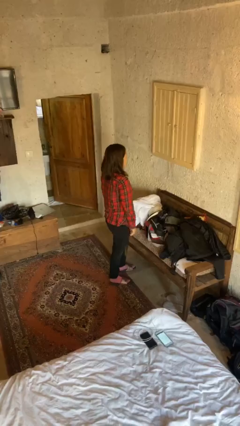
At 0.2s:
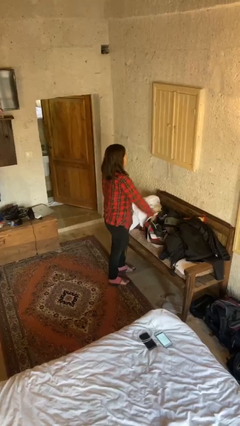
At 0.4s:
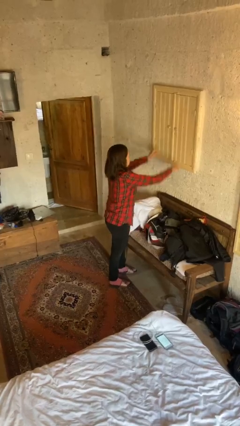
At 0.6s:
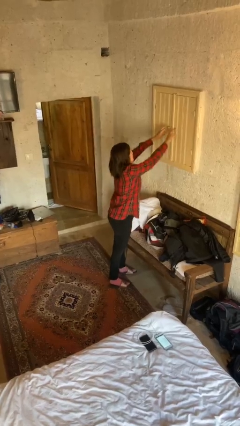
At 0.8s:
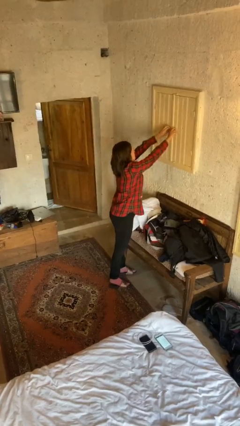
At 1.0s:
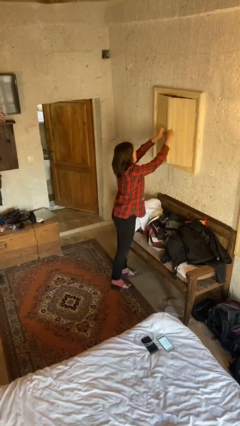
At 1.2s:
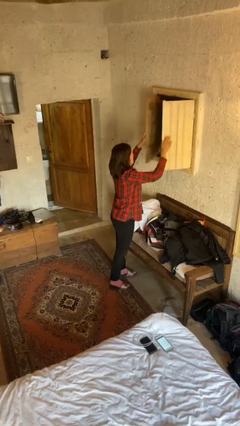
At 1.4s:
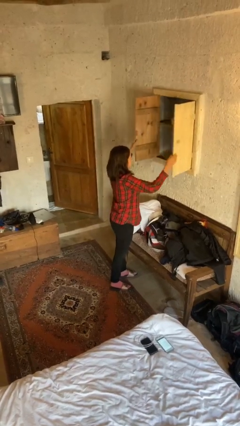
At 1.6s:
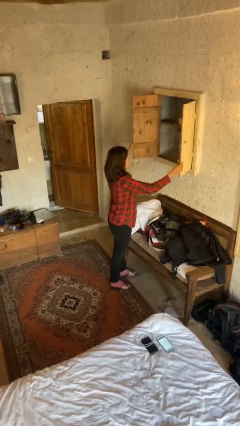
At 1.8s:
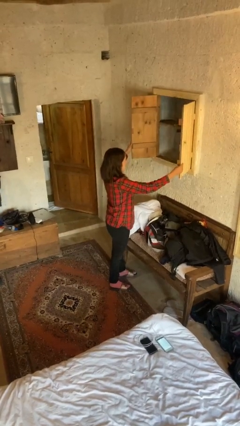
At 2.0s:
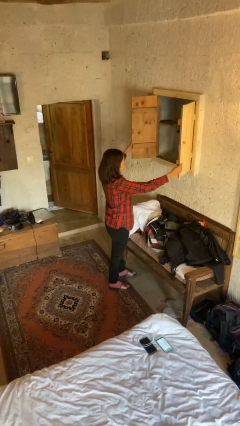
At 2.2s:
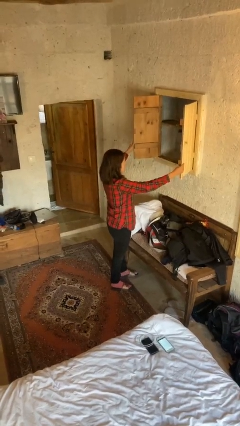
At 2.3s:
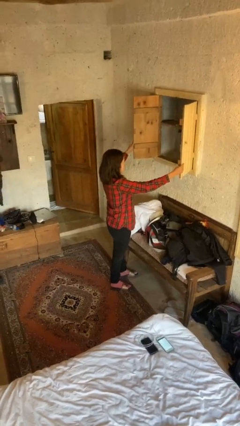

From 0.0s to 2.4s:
person opens closet door

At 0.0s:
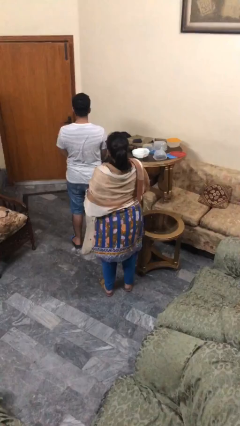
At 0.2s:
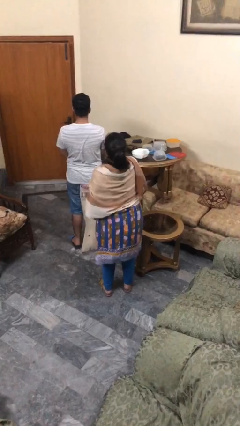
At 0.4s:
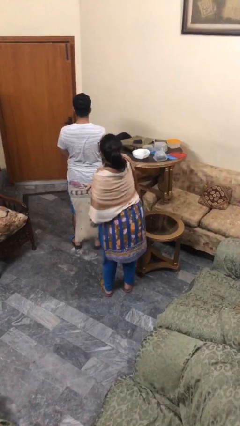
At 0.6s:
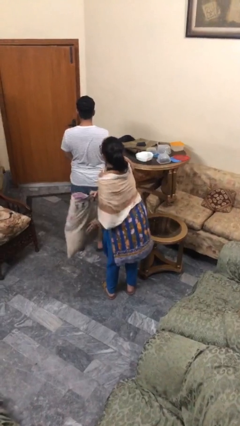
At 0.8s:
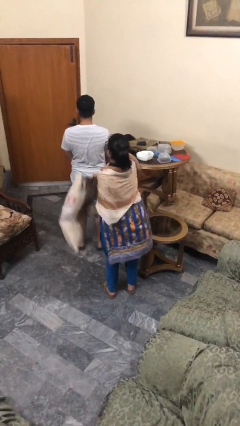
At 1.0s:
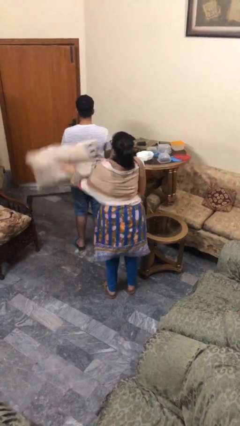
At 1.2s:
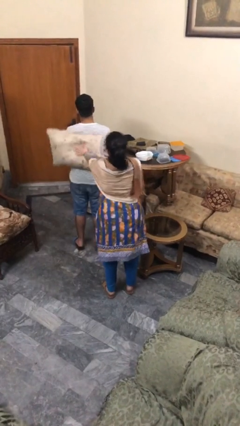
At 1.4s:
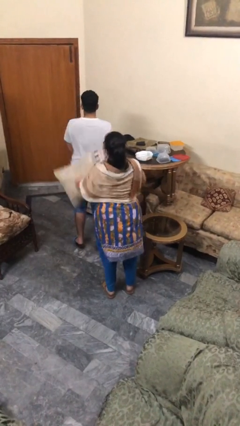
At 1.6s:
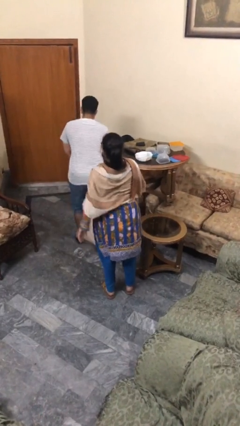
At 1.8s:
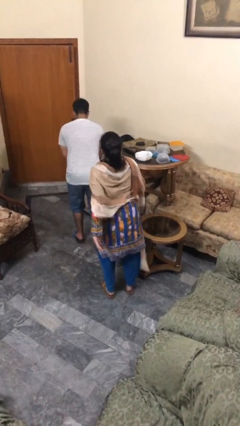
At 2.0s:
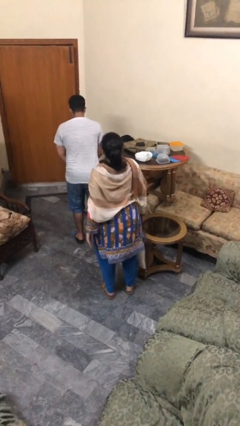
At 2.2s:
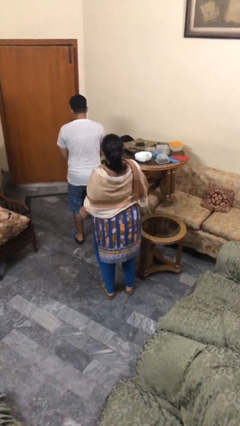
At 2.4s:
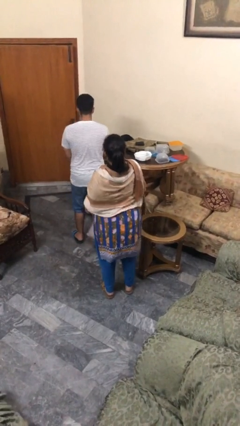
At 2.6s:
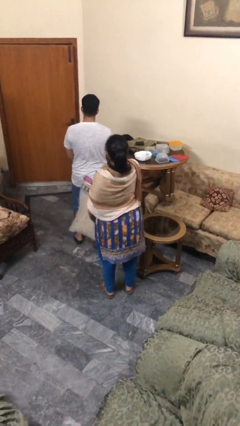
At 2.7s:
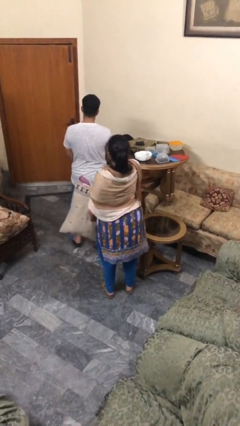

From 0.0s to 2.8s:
person hits person with pillow

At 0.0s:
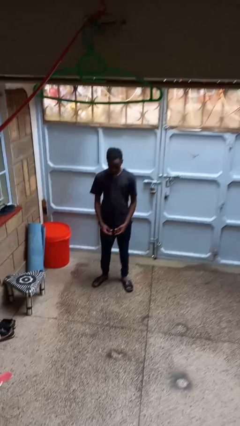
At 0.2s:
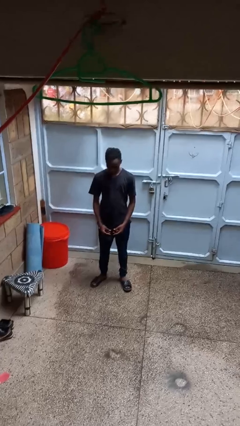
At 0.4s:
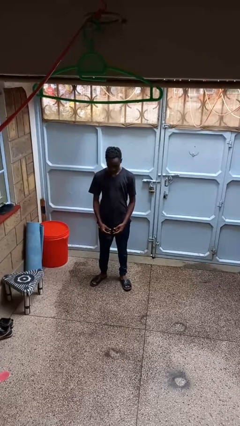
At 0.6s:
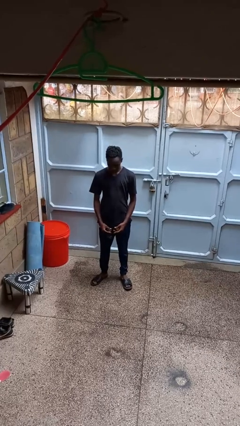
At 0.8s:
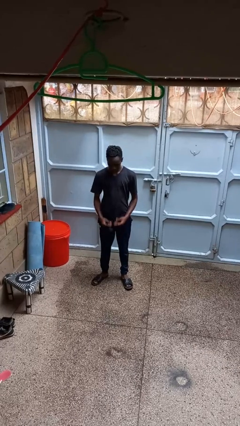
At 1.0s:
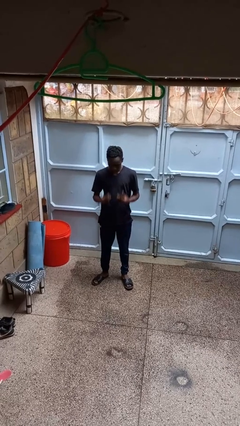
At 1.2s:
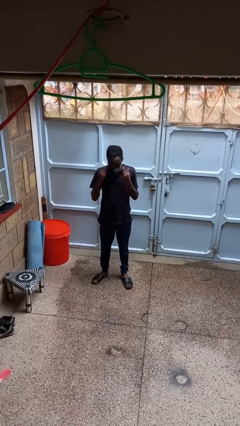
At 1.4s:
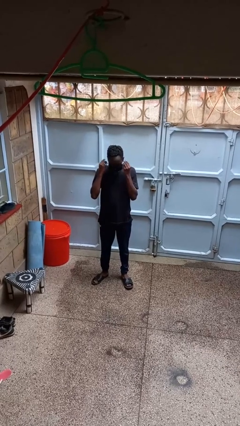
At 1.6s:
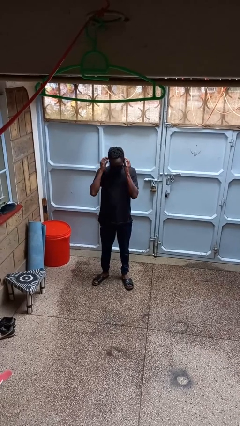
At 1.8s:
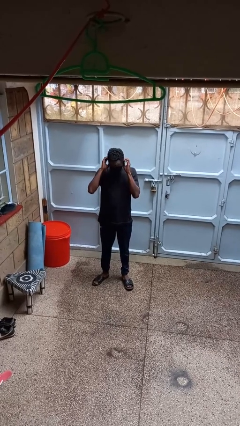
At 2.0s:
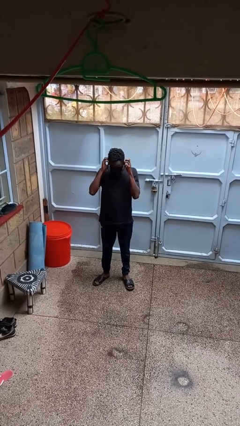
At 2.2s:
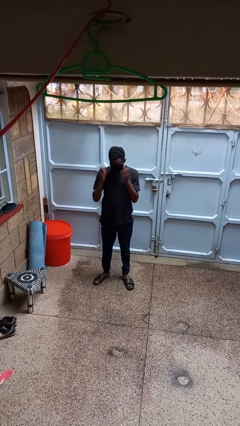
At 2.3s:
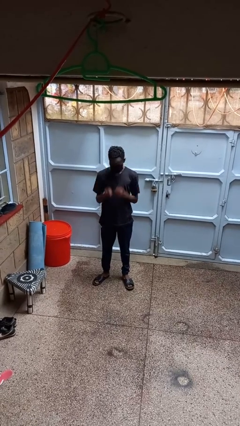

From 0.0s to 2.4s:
person puts on facemask

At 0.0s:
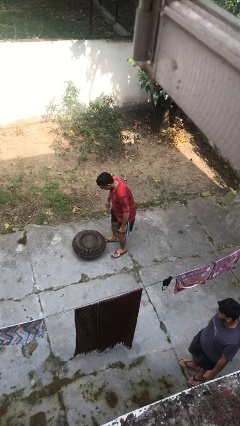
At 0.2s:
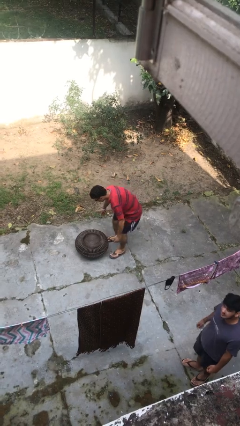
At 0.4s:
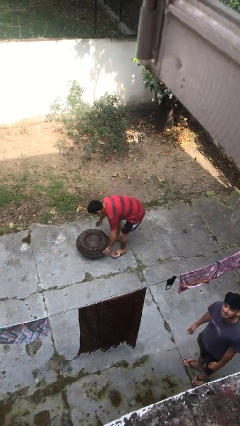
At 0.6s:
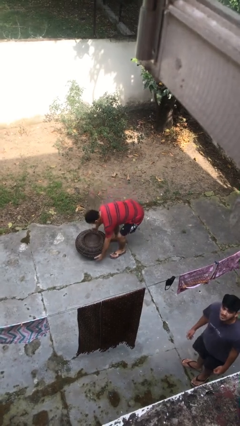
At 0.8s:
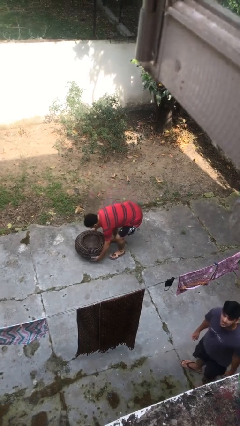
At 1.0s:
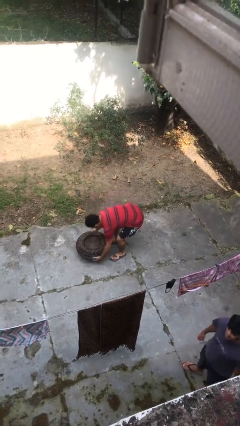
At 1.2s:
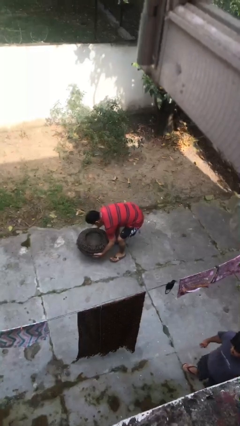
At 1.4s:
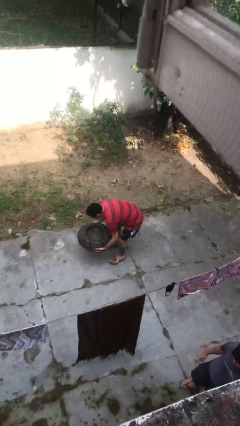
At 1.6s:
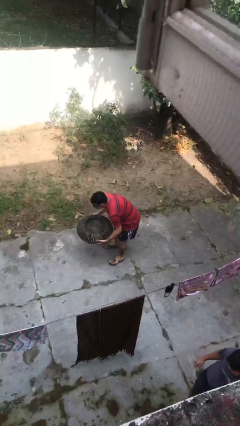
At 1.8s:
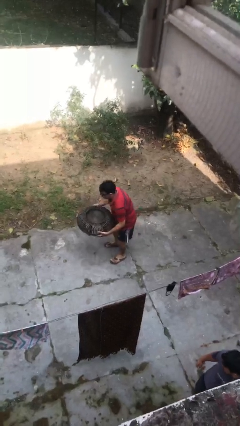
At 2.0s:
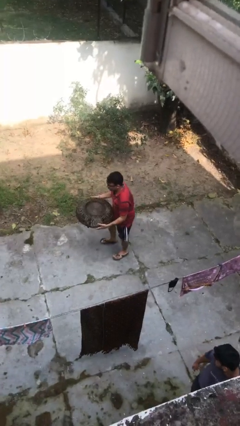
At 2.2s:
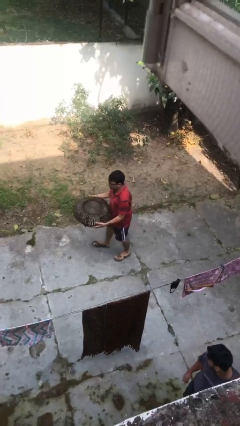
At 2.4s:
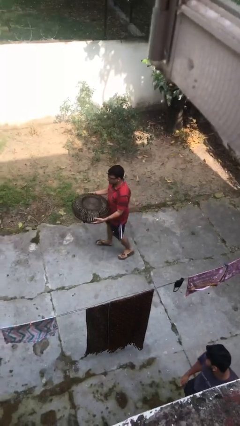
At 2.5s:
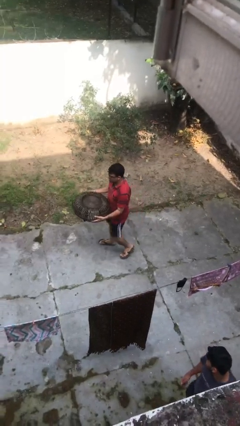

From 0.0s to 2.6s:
person picks up object from floor

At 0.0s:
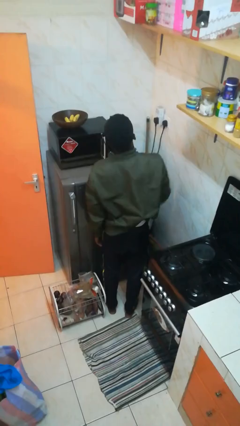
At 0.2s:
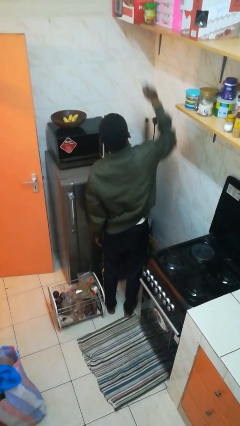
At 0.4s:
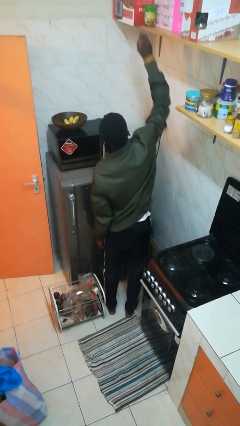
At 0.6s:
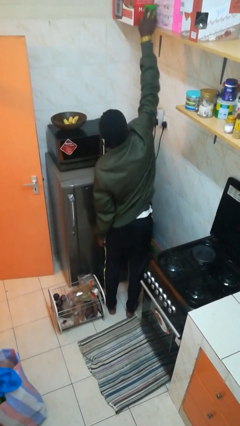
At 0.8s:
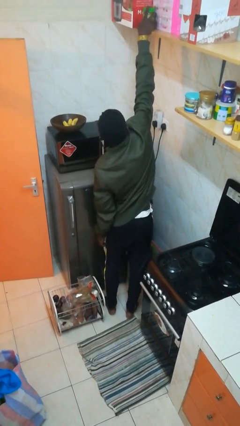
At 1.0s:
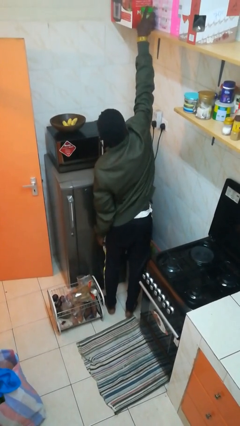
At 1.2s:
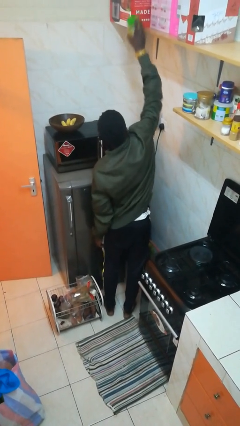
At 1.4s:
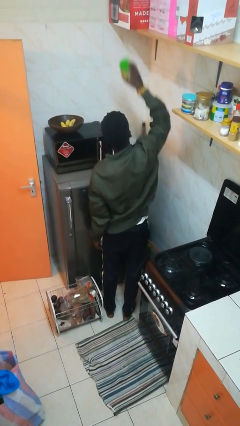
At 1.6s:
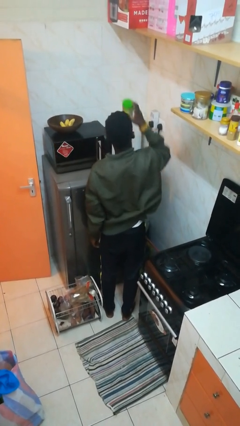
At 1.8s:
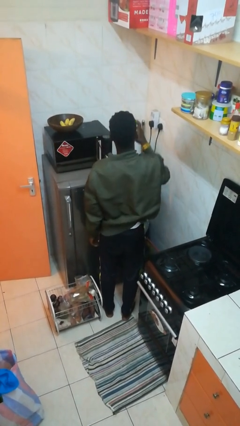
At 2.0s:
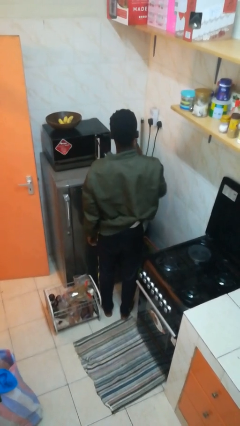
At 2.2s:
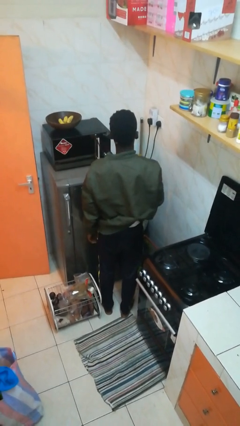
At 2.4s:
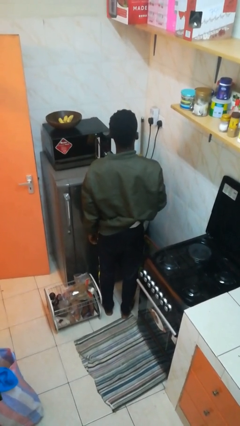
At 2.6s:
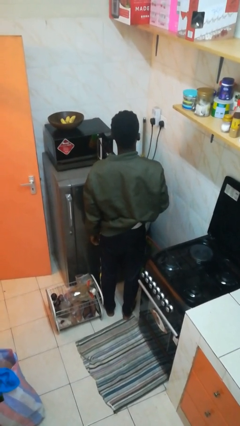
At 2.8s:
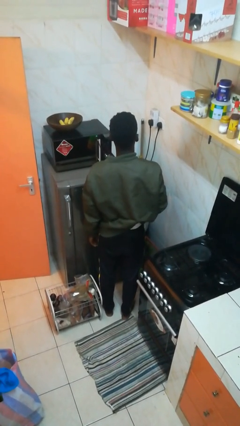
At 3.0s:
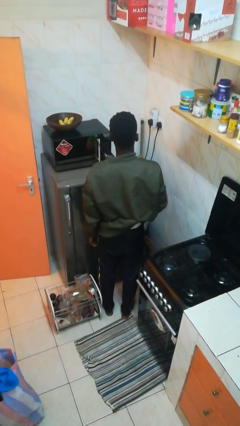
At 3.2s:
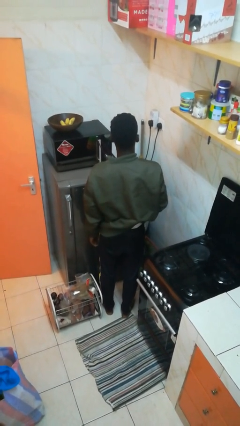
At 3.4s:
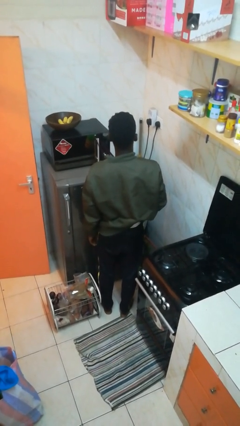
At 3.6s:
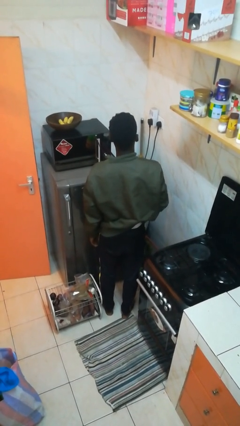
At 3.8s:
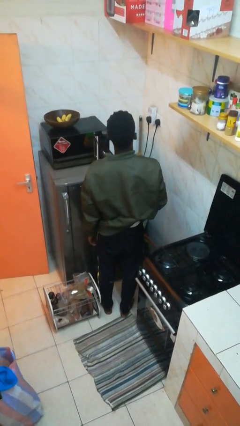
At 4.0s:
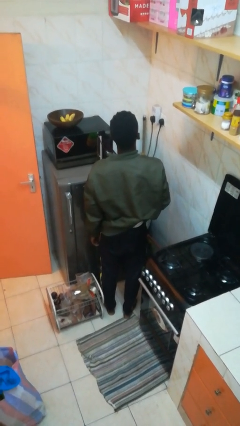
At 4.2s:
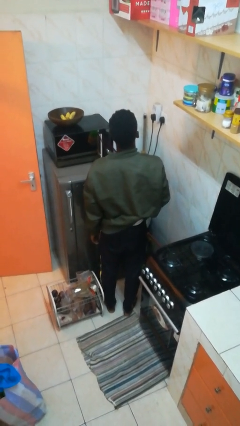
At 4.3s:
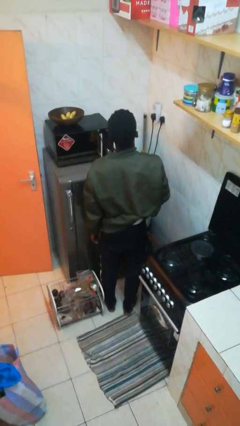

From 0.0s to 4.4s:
person picks up object from shelf

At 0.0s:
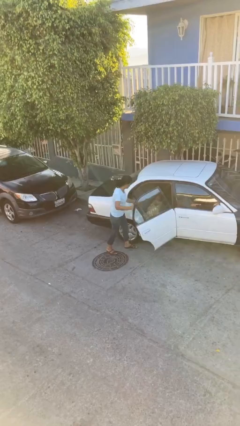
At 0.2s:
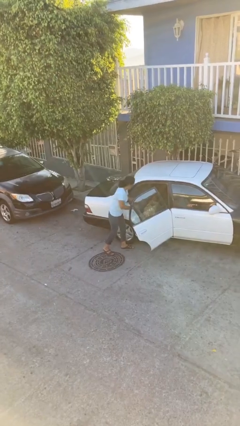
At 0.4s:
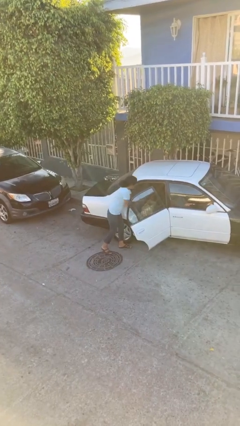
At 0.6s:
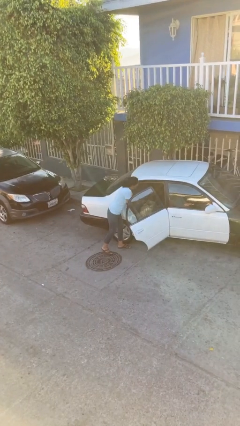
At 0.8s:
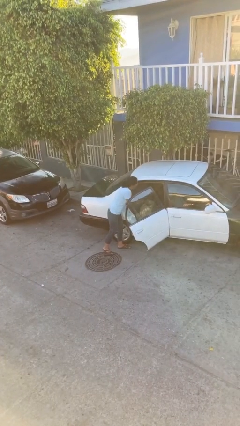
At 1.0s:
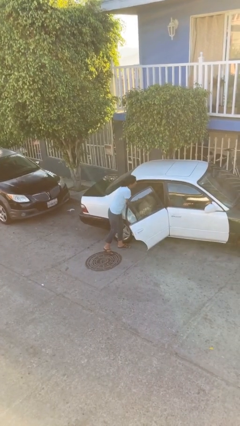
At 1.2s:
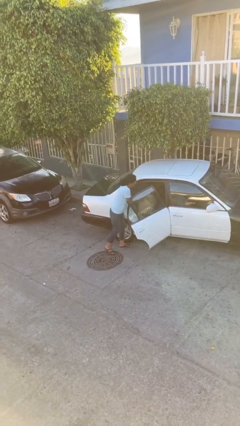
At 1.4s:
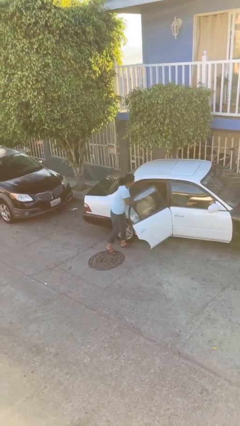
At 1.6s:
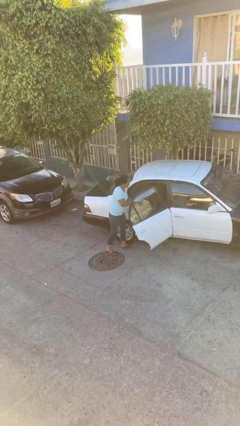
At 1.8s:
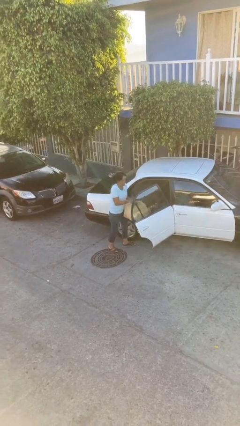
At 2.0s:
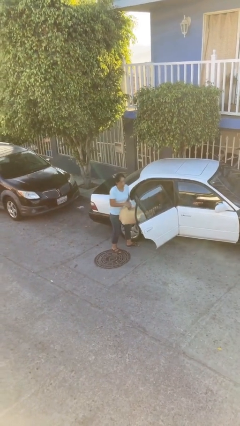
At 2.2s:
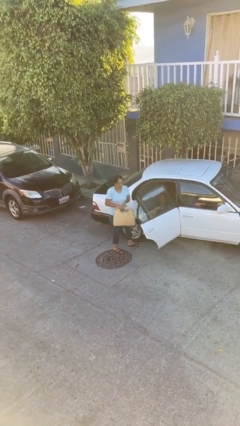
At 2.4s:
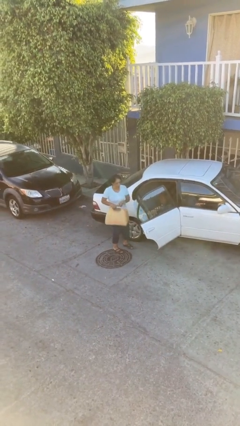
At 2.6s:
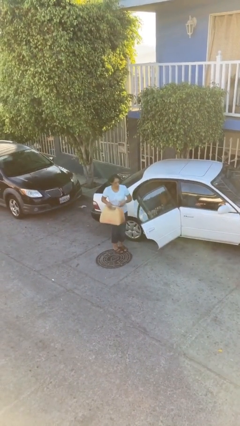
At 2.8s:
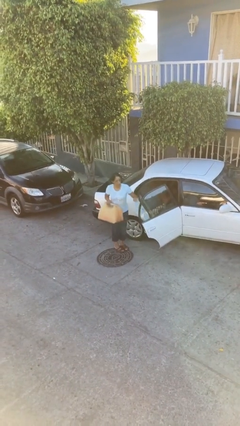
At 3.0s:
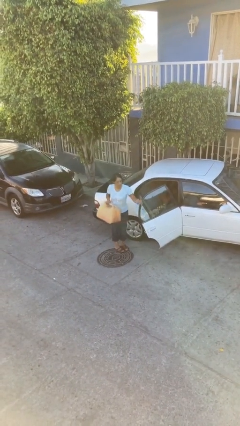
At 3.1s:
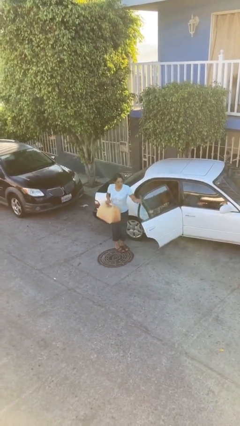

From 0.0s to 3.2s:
person unloads car
